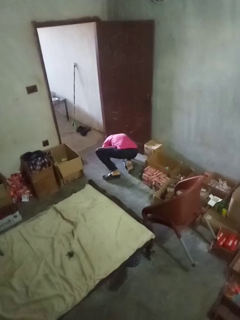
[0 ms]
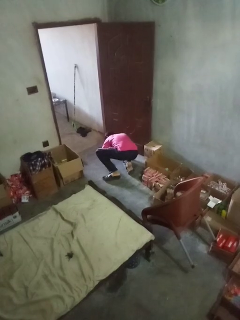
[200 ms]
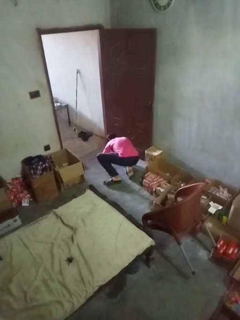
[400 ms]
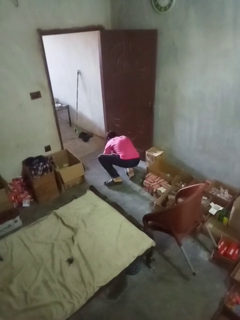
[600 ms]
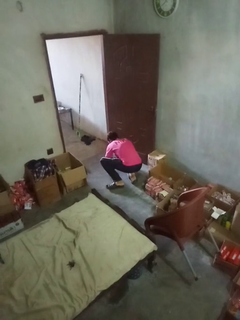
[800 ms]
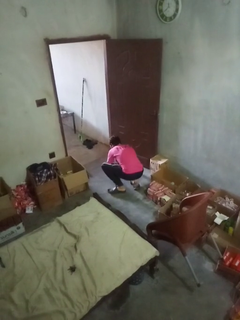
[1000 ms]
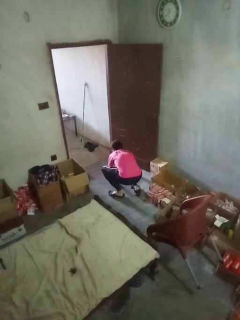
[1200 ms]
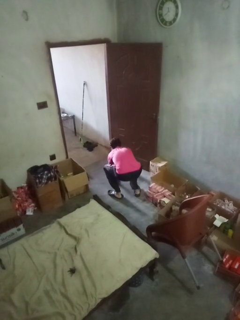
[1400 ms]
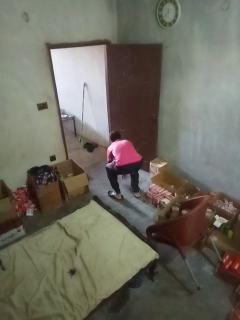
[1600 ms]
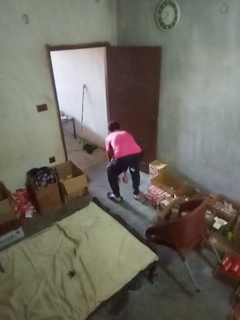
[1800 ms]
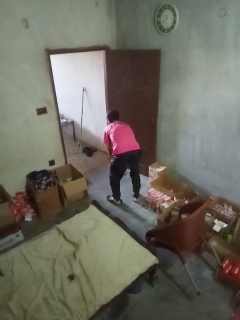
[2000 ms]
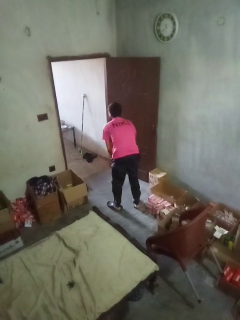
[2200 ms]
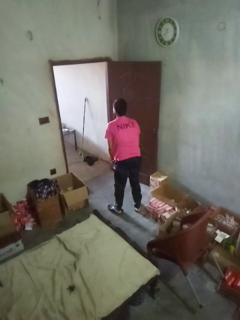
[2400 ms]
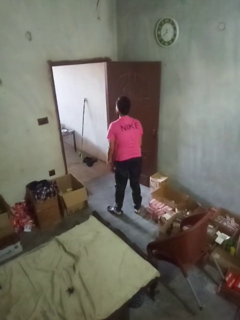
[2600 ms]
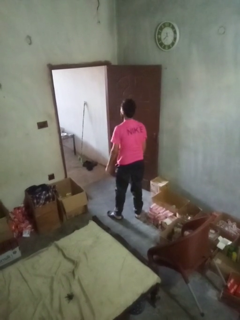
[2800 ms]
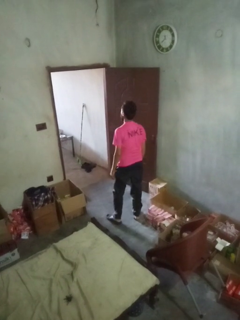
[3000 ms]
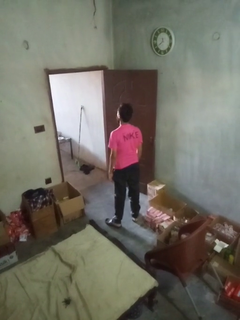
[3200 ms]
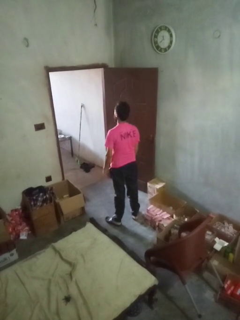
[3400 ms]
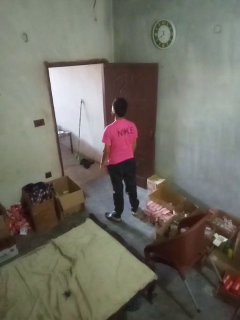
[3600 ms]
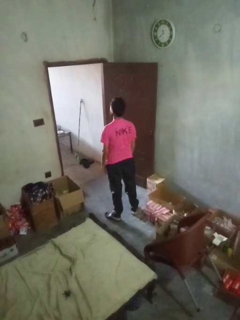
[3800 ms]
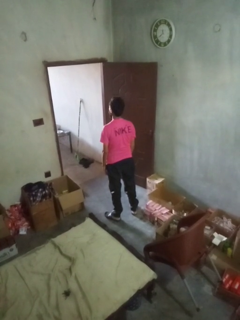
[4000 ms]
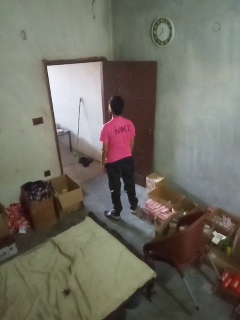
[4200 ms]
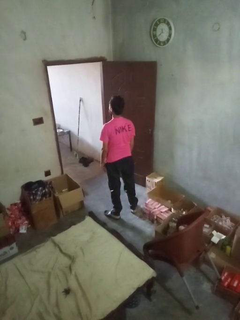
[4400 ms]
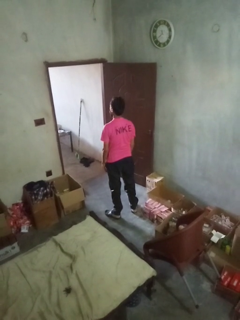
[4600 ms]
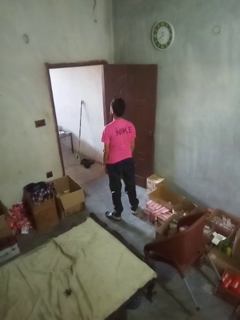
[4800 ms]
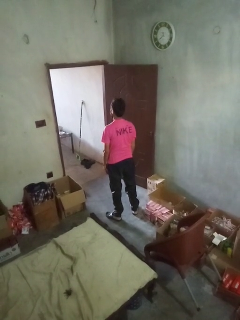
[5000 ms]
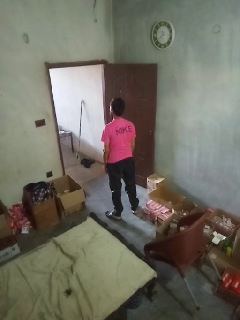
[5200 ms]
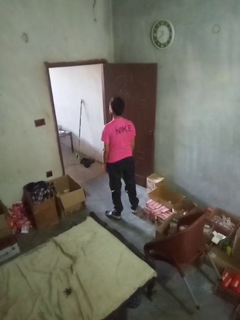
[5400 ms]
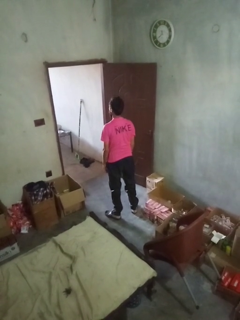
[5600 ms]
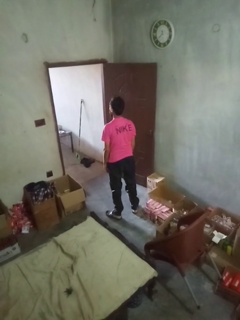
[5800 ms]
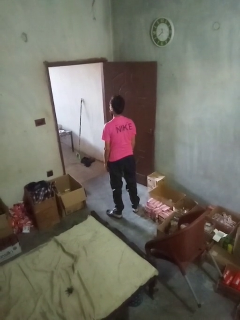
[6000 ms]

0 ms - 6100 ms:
person stands up from floor

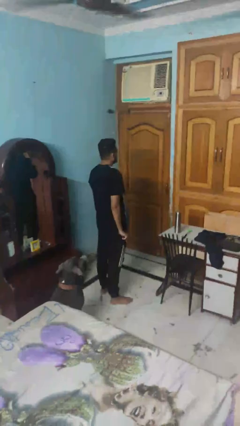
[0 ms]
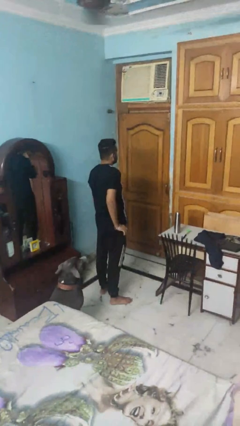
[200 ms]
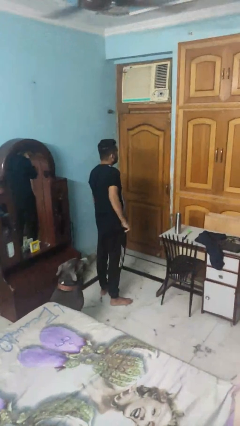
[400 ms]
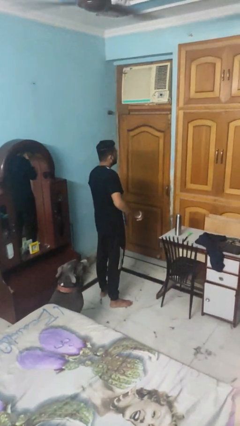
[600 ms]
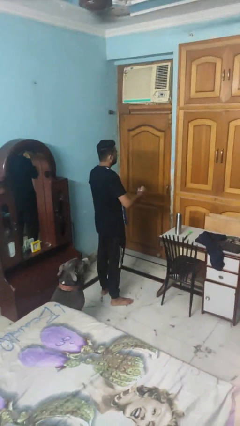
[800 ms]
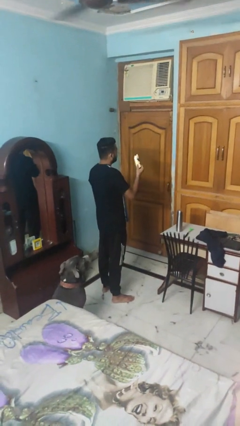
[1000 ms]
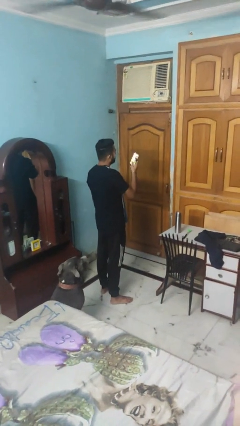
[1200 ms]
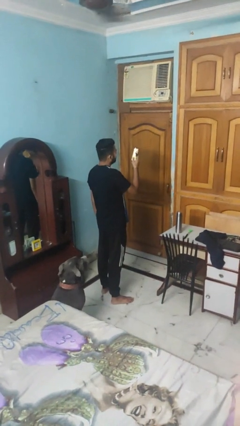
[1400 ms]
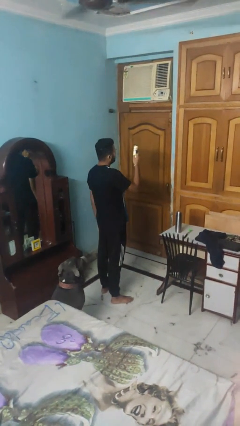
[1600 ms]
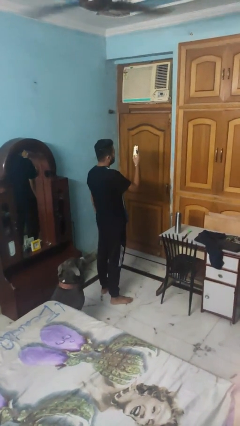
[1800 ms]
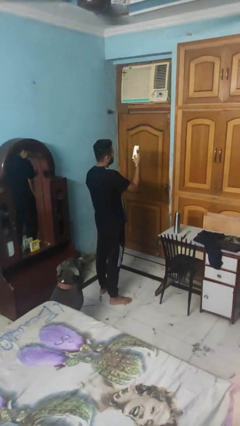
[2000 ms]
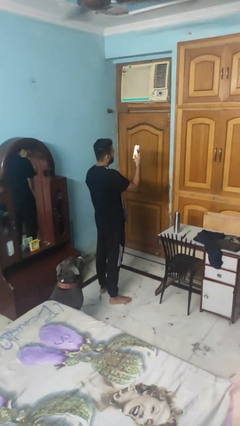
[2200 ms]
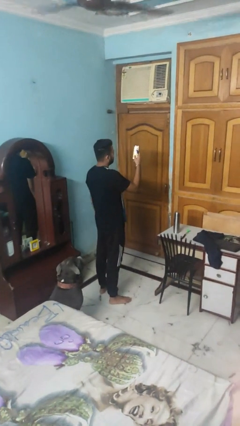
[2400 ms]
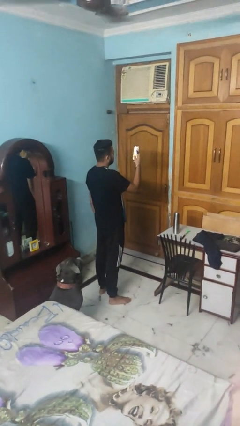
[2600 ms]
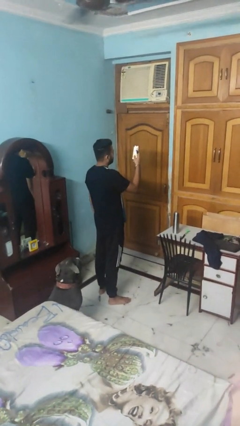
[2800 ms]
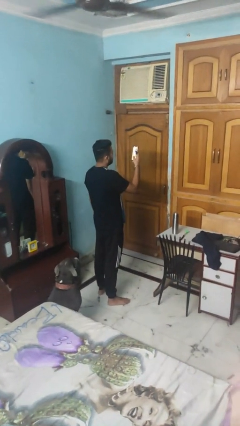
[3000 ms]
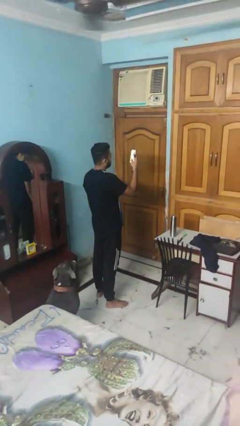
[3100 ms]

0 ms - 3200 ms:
person takes phone from pocket

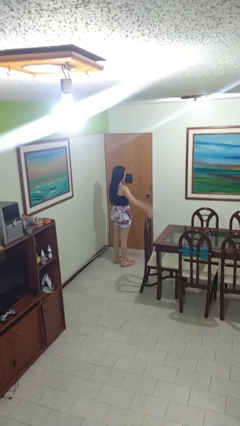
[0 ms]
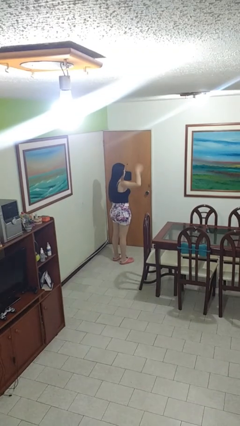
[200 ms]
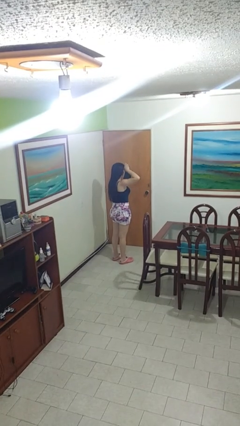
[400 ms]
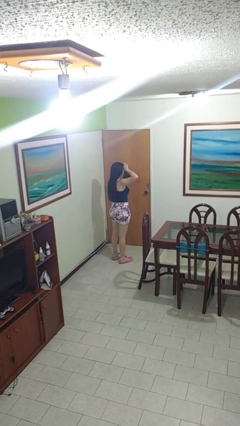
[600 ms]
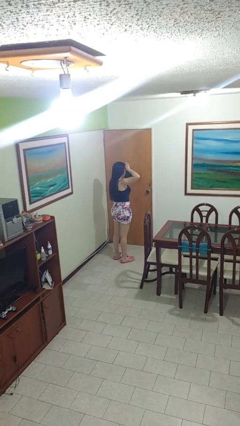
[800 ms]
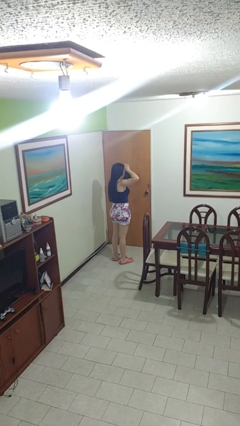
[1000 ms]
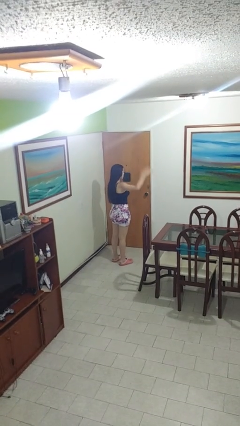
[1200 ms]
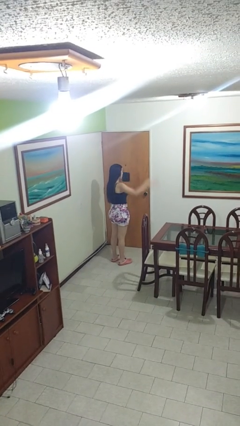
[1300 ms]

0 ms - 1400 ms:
person salutes

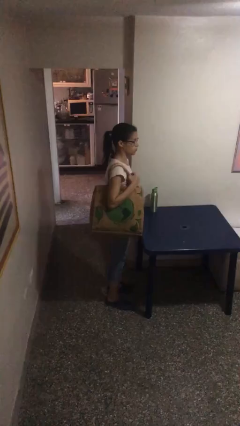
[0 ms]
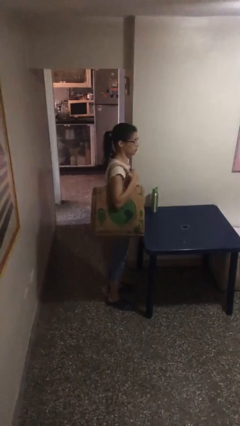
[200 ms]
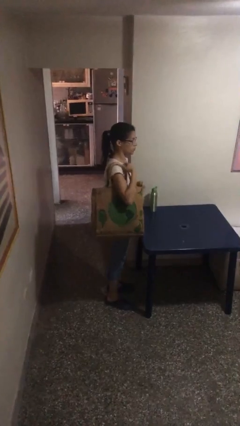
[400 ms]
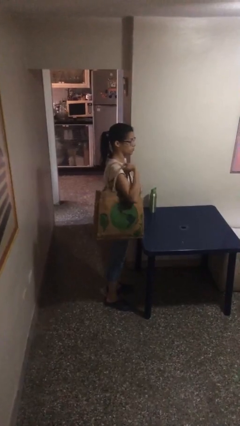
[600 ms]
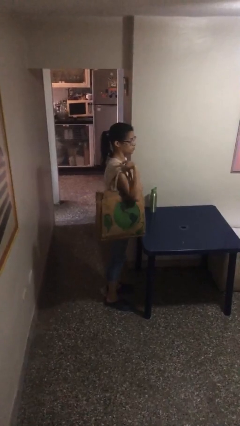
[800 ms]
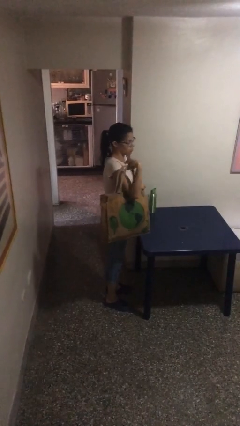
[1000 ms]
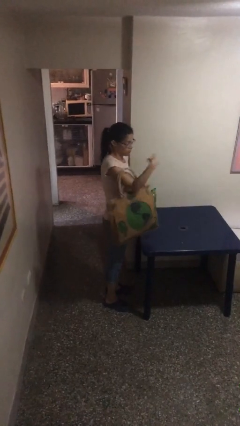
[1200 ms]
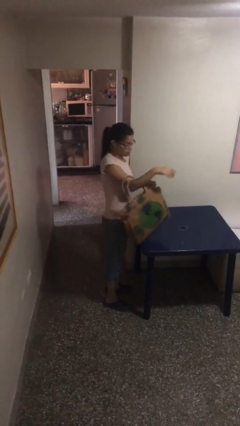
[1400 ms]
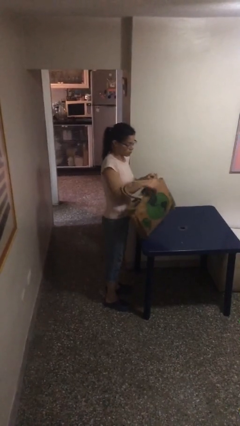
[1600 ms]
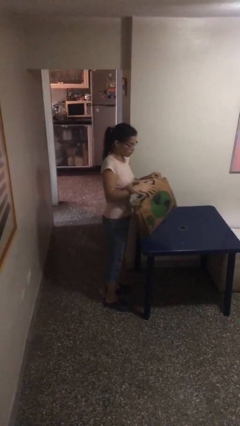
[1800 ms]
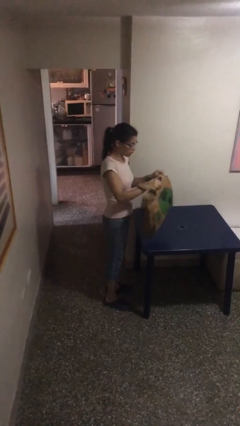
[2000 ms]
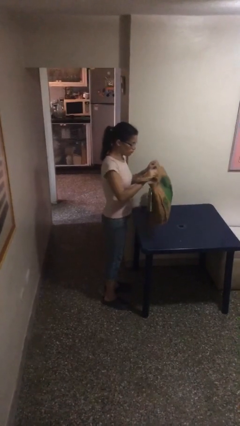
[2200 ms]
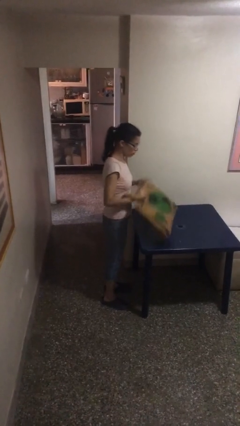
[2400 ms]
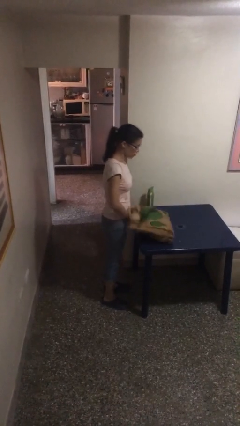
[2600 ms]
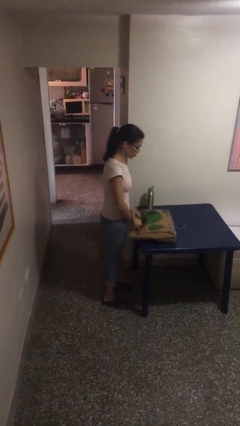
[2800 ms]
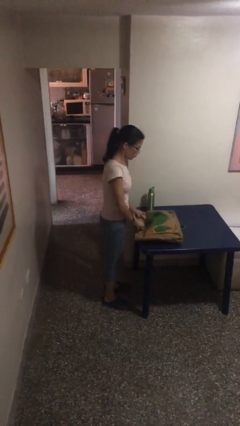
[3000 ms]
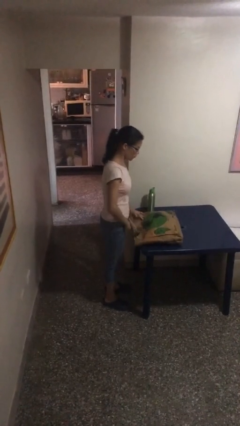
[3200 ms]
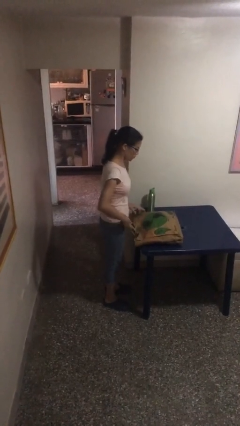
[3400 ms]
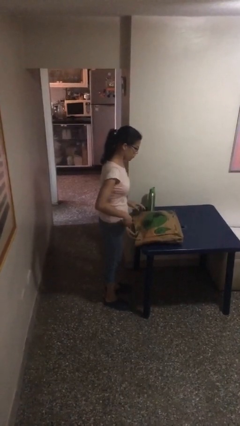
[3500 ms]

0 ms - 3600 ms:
person puts down object on table

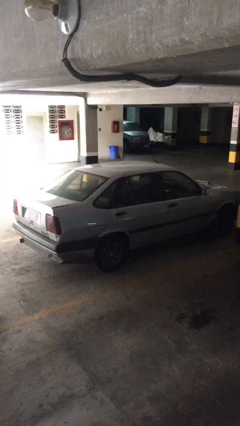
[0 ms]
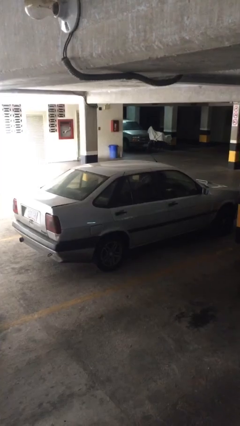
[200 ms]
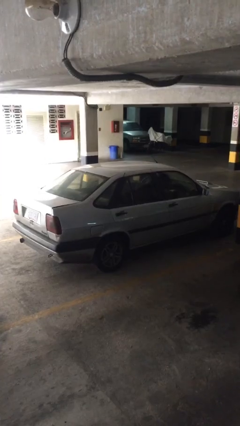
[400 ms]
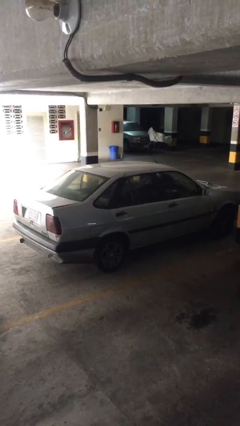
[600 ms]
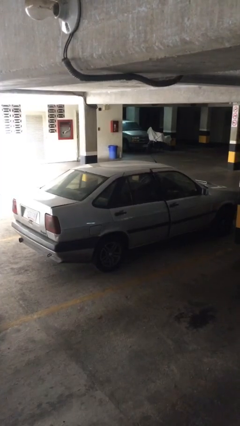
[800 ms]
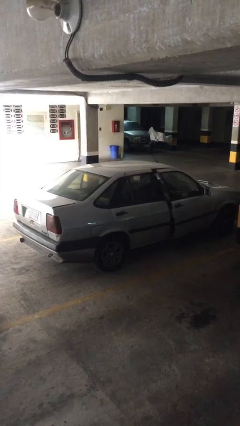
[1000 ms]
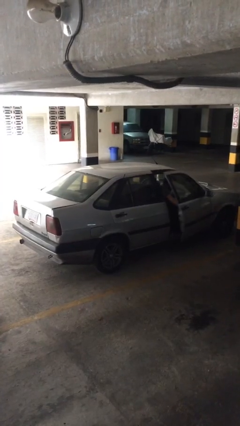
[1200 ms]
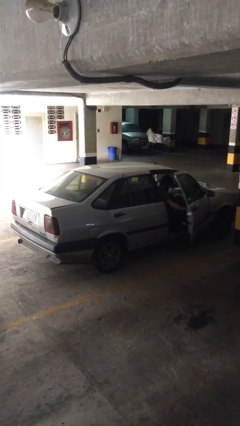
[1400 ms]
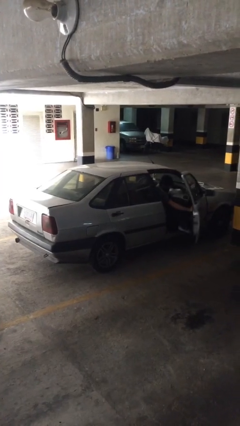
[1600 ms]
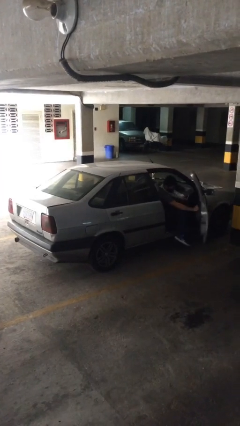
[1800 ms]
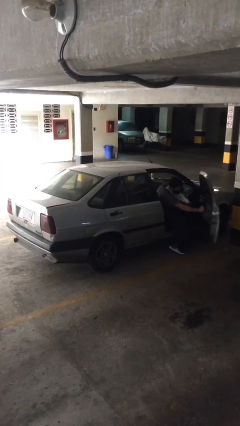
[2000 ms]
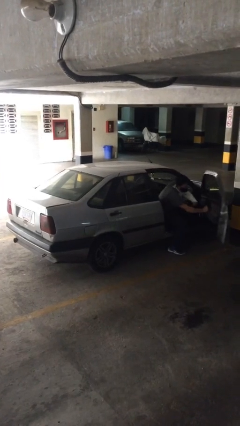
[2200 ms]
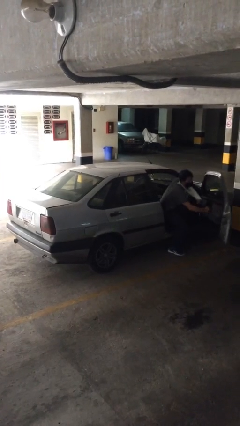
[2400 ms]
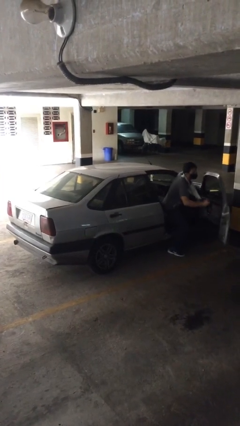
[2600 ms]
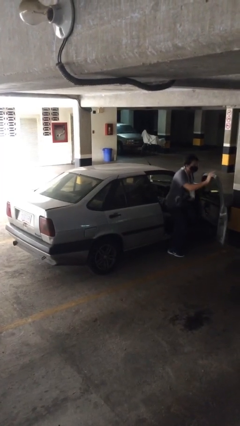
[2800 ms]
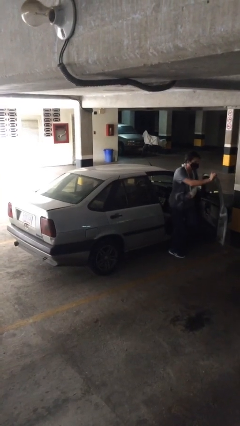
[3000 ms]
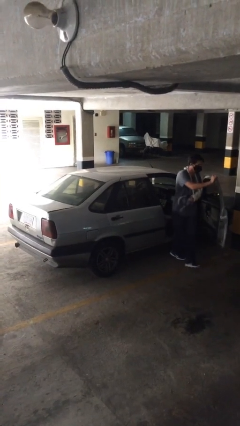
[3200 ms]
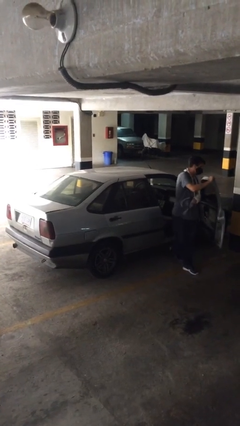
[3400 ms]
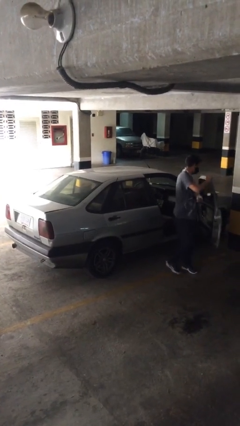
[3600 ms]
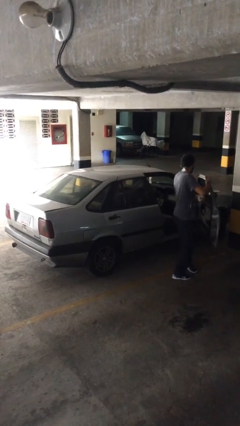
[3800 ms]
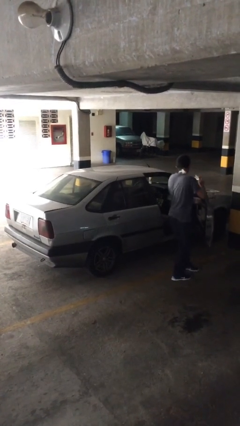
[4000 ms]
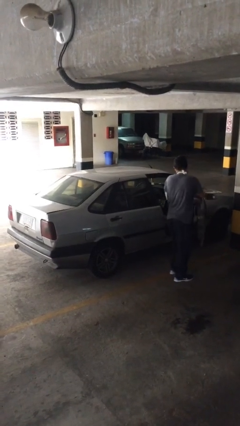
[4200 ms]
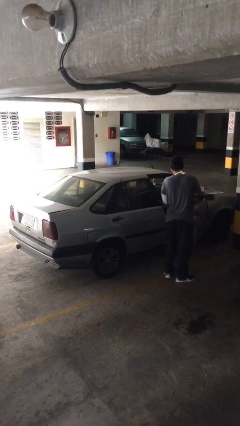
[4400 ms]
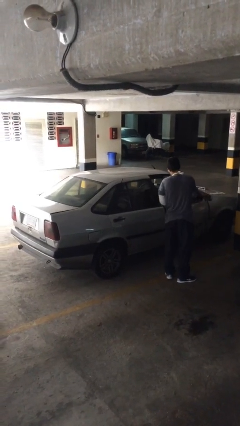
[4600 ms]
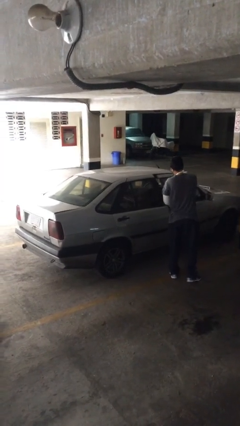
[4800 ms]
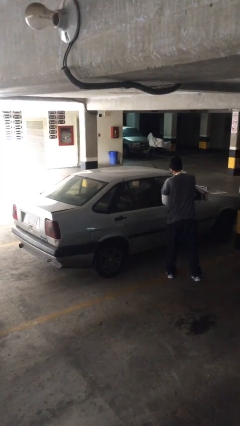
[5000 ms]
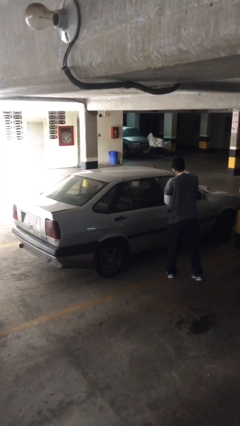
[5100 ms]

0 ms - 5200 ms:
car drops off person
